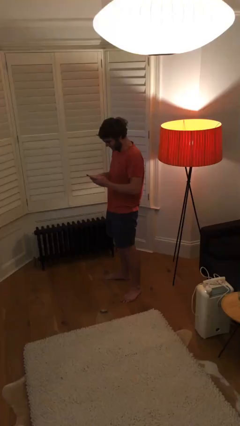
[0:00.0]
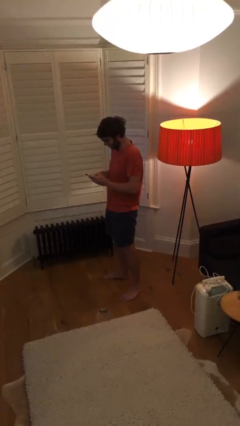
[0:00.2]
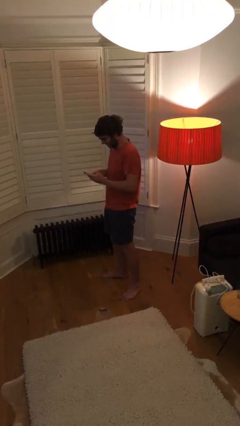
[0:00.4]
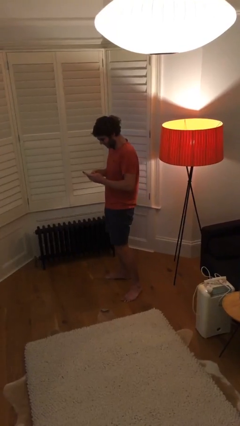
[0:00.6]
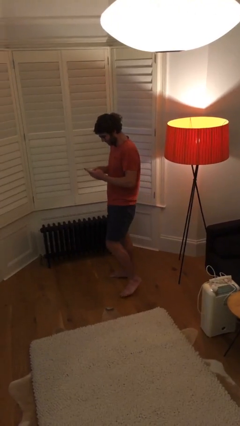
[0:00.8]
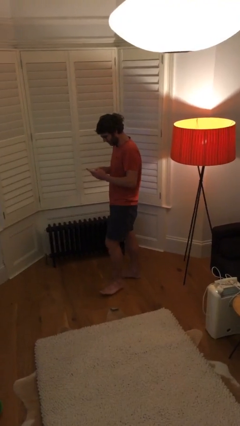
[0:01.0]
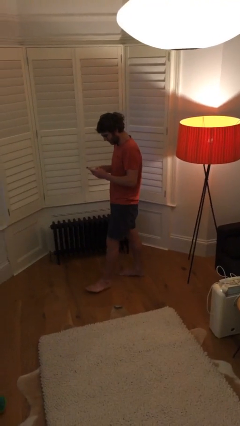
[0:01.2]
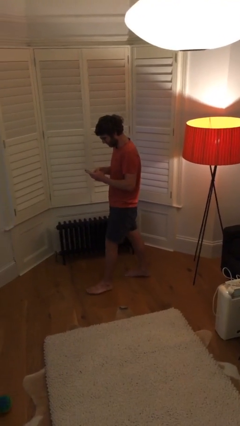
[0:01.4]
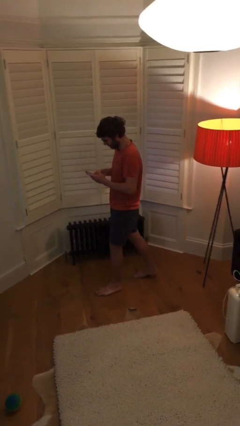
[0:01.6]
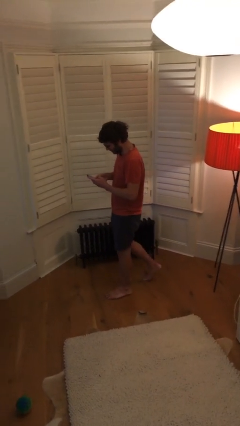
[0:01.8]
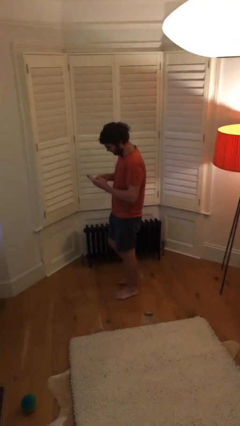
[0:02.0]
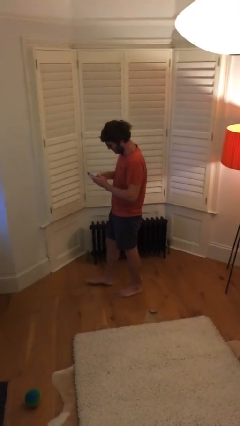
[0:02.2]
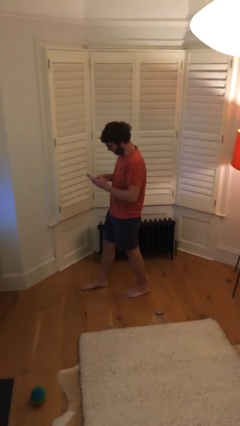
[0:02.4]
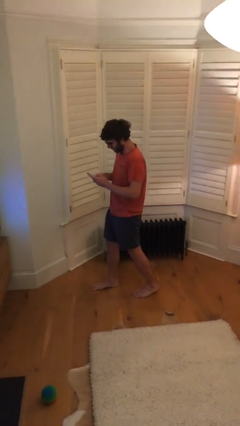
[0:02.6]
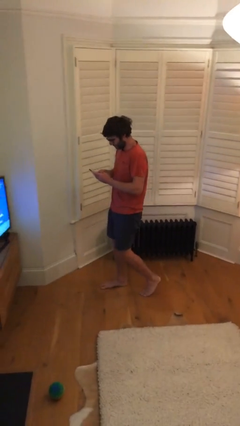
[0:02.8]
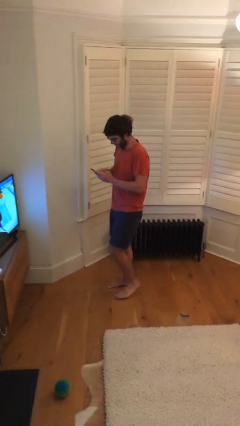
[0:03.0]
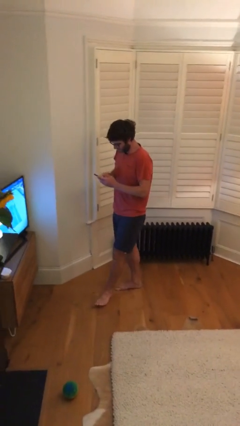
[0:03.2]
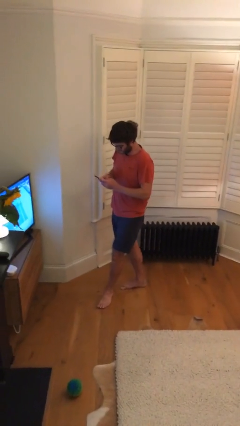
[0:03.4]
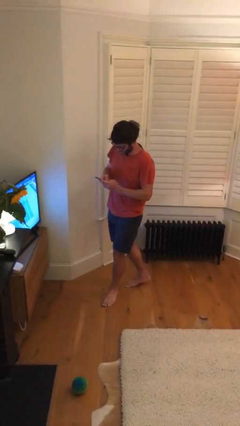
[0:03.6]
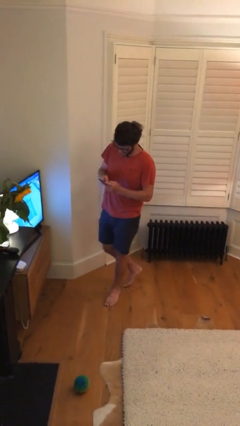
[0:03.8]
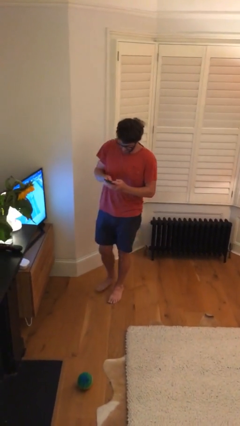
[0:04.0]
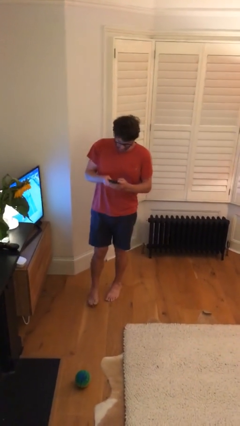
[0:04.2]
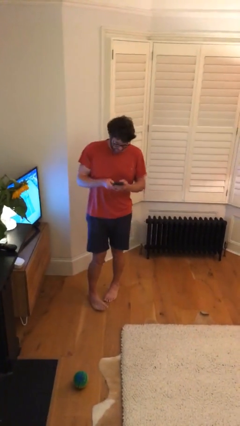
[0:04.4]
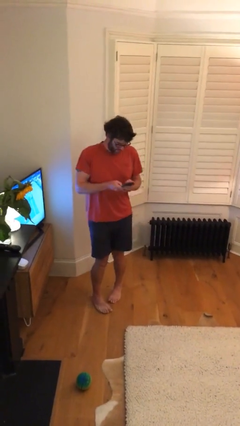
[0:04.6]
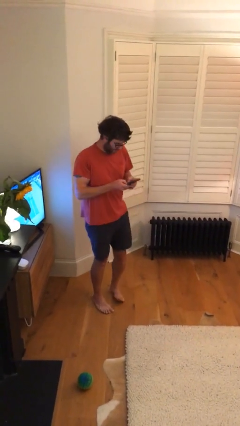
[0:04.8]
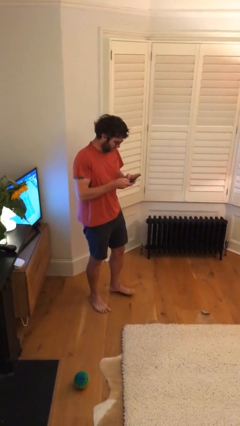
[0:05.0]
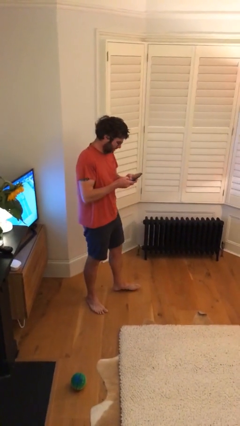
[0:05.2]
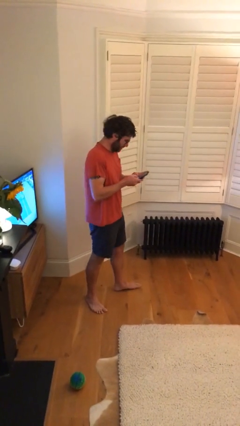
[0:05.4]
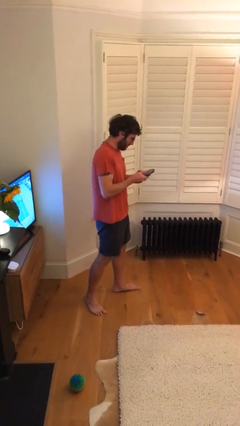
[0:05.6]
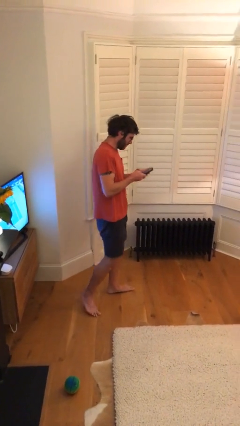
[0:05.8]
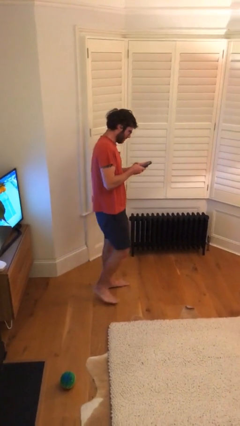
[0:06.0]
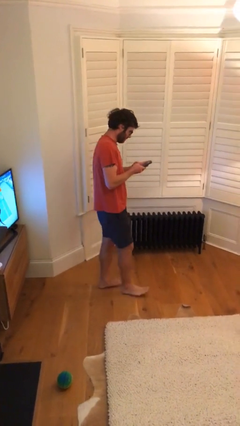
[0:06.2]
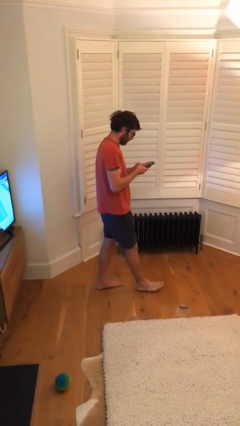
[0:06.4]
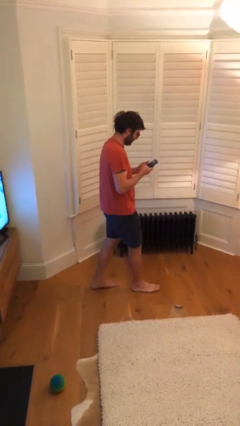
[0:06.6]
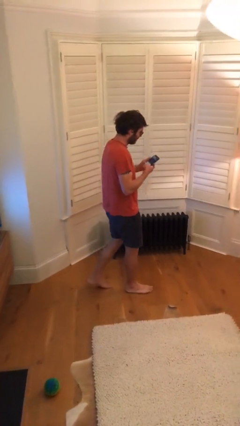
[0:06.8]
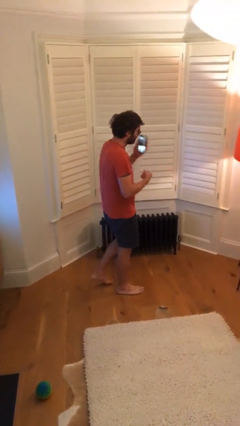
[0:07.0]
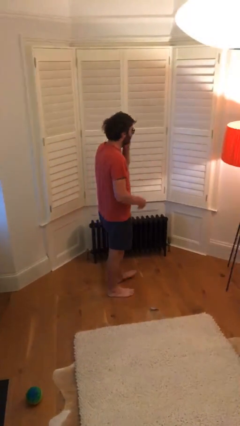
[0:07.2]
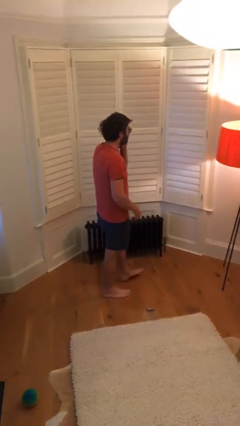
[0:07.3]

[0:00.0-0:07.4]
person texts on phone

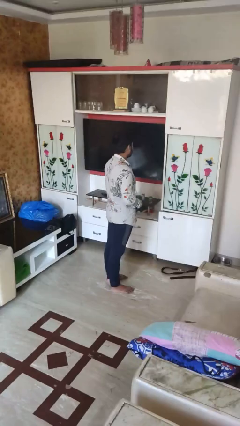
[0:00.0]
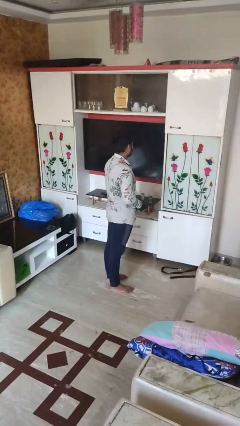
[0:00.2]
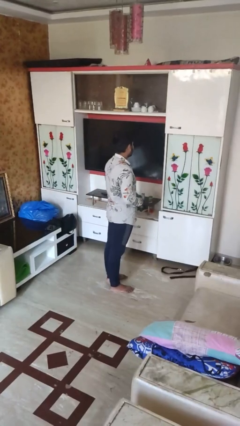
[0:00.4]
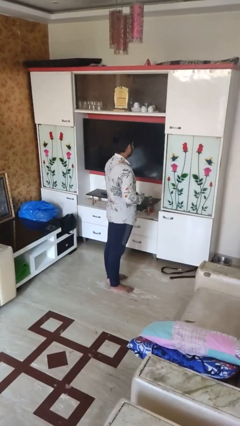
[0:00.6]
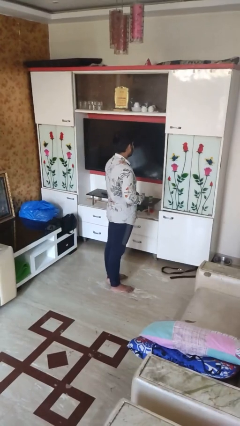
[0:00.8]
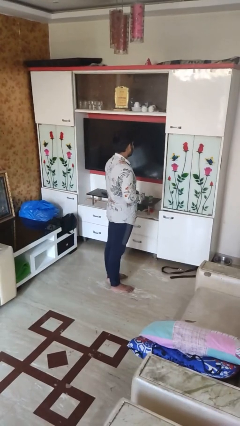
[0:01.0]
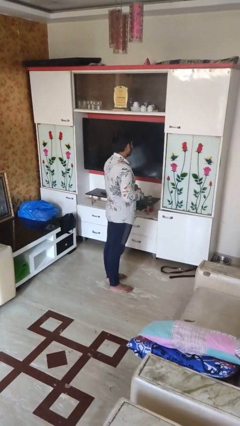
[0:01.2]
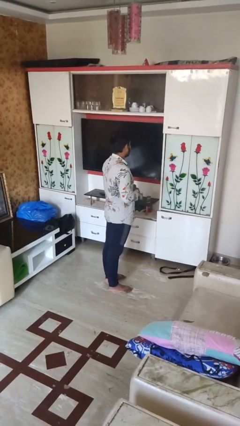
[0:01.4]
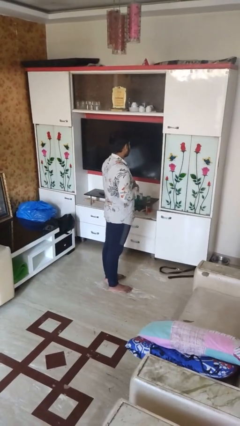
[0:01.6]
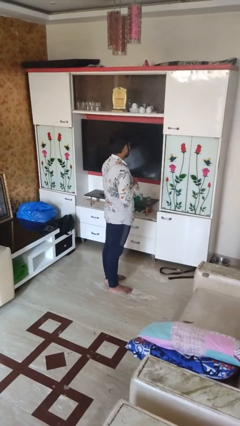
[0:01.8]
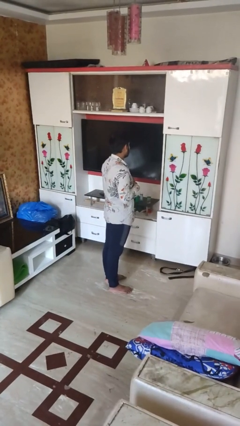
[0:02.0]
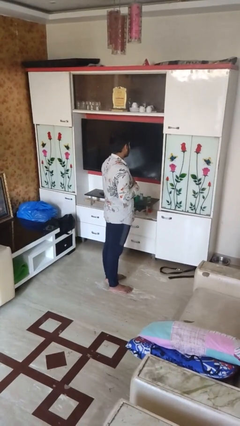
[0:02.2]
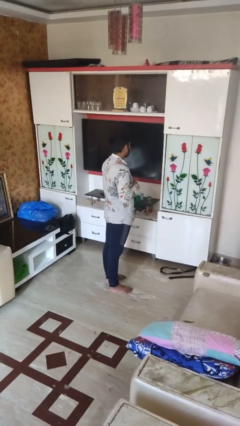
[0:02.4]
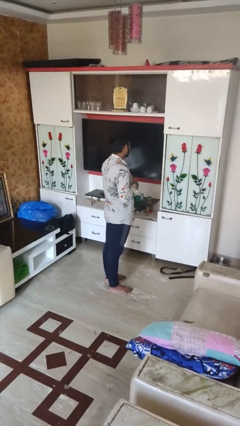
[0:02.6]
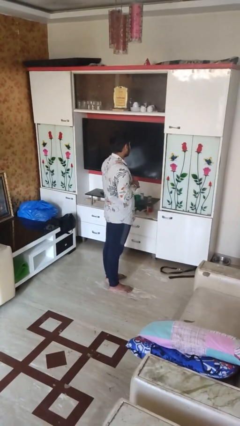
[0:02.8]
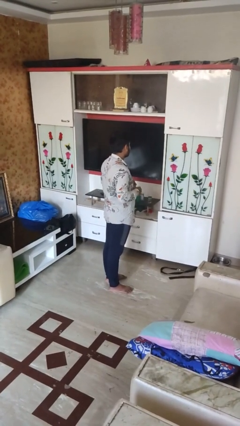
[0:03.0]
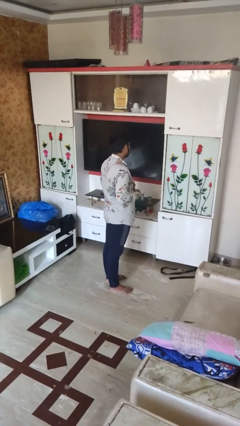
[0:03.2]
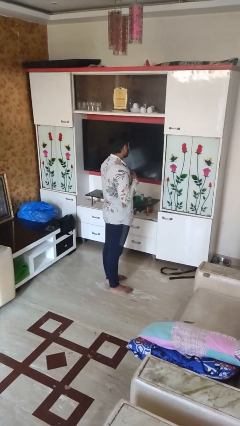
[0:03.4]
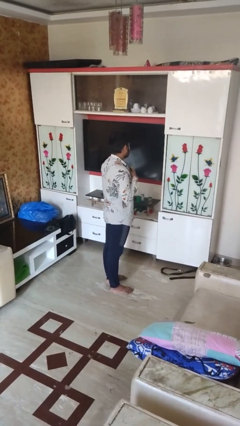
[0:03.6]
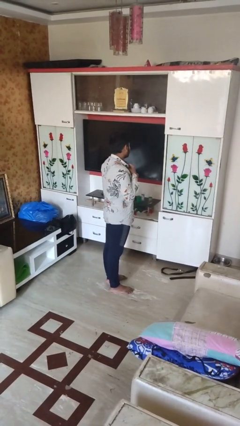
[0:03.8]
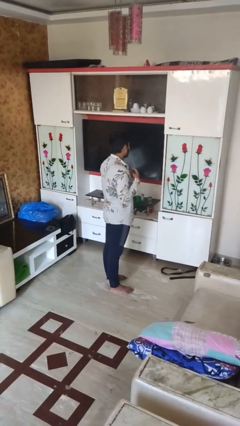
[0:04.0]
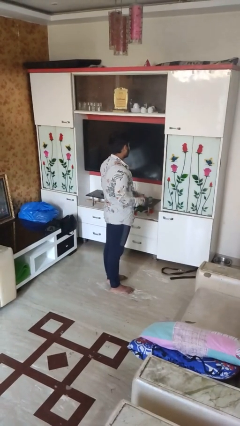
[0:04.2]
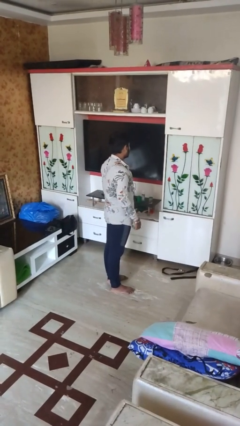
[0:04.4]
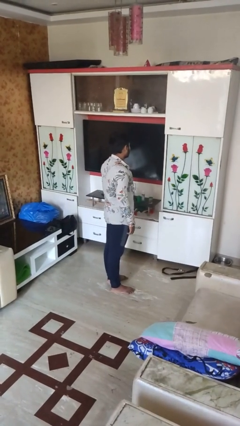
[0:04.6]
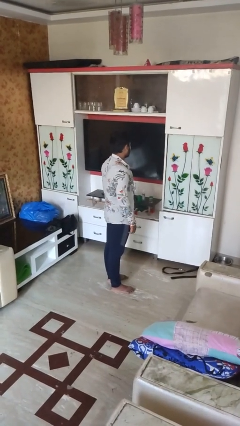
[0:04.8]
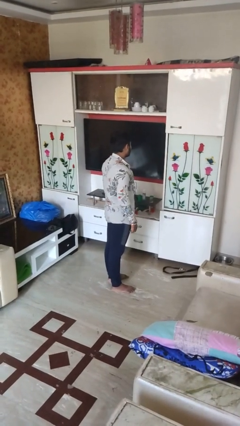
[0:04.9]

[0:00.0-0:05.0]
person unbuttons shirt

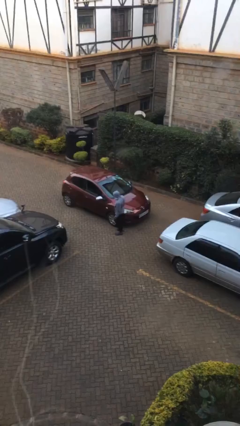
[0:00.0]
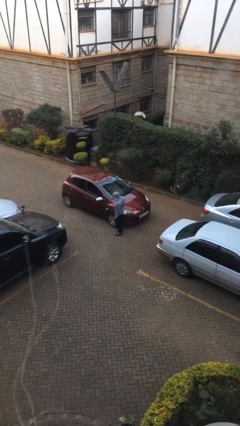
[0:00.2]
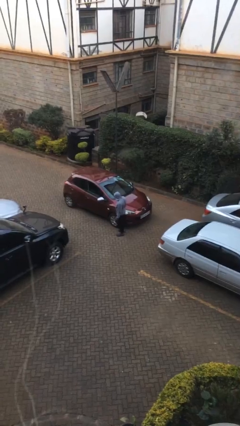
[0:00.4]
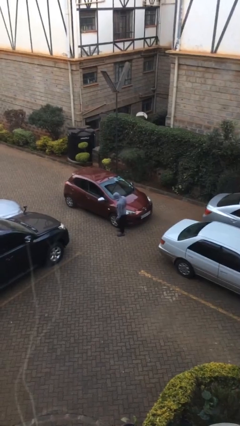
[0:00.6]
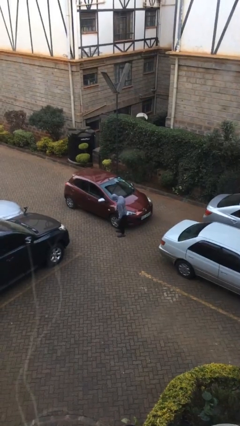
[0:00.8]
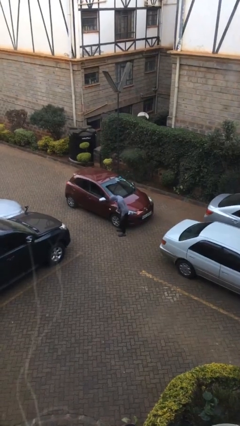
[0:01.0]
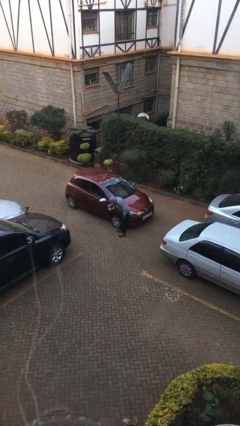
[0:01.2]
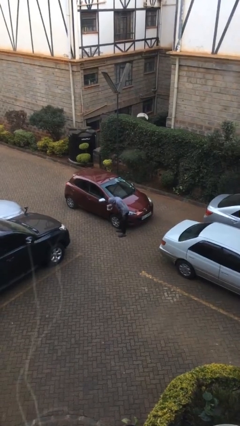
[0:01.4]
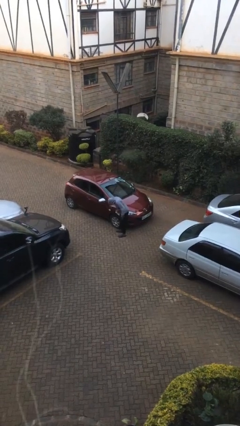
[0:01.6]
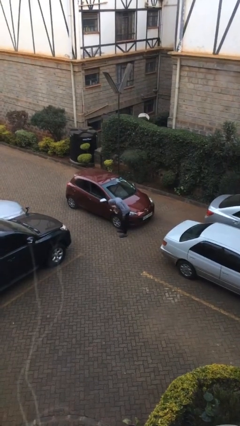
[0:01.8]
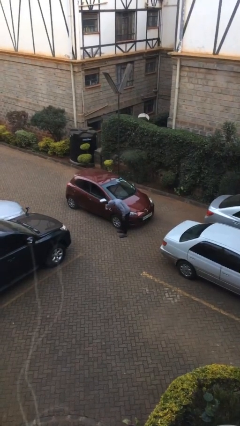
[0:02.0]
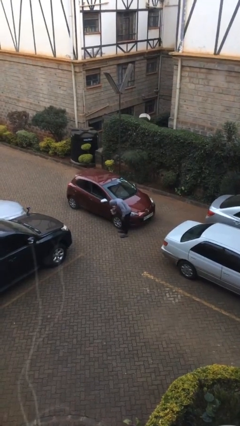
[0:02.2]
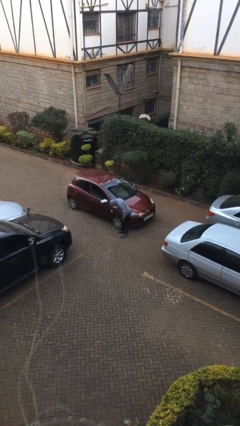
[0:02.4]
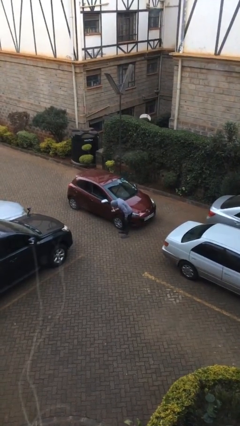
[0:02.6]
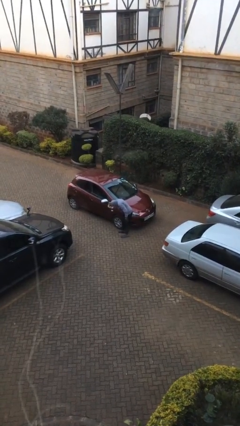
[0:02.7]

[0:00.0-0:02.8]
person polishes car with rag

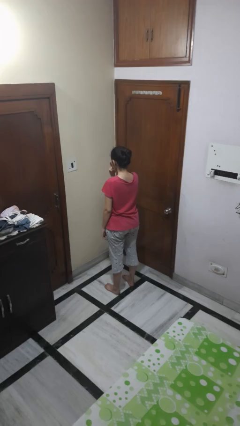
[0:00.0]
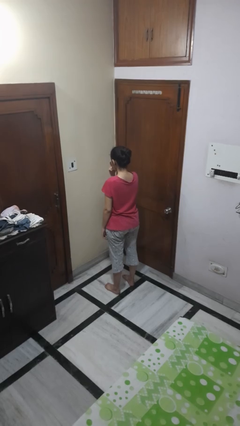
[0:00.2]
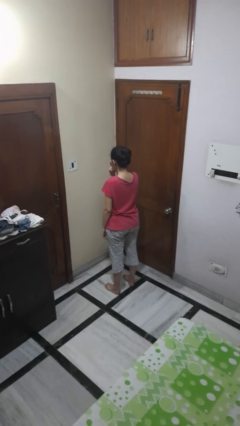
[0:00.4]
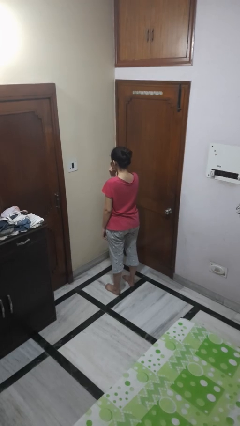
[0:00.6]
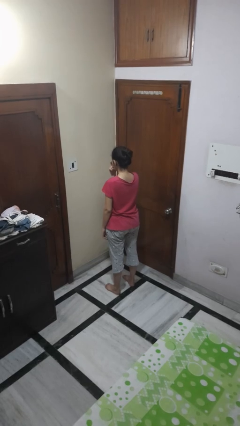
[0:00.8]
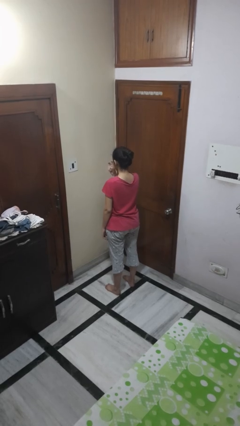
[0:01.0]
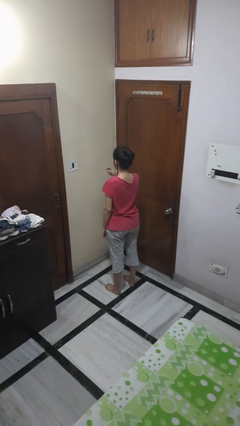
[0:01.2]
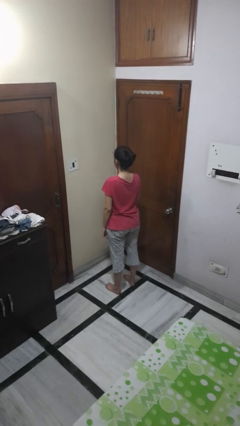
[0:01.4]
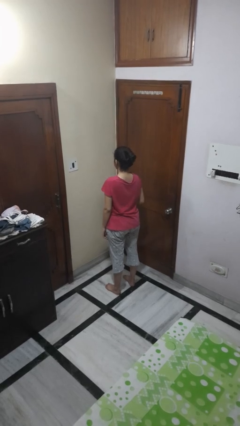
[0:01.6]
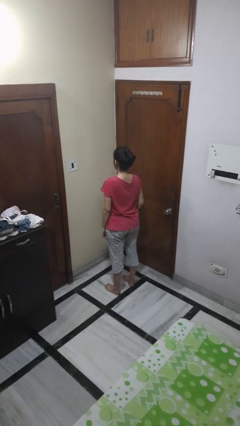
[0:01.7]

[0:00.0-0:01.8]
person gestures watch closely

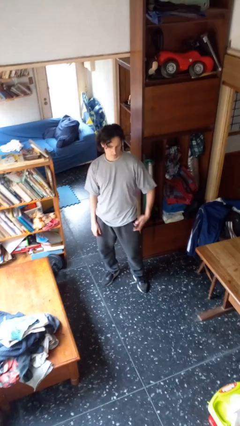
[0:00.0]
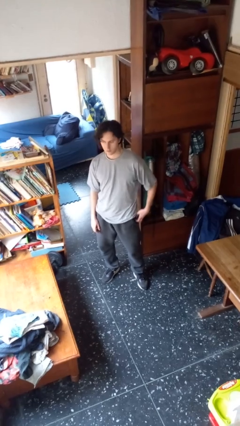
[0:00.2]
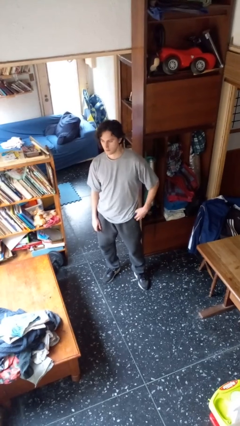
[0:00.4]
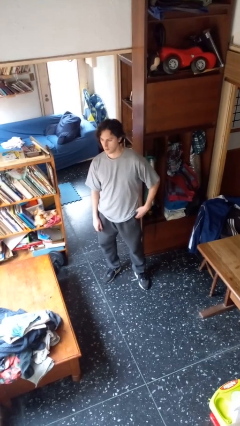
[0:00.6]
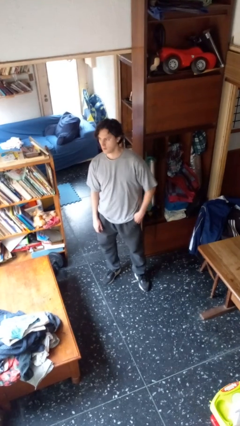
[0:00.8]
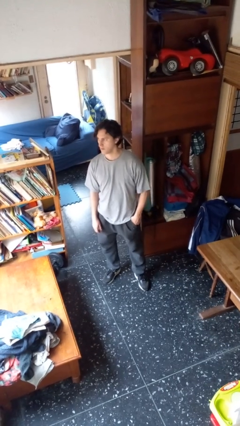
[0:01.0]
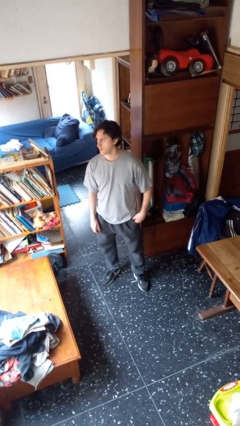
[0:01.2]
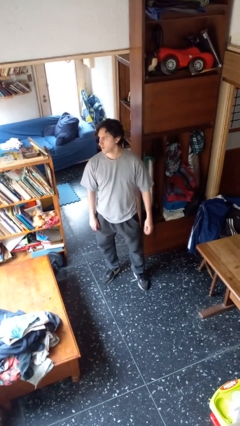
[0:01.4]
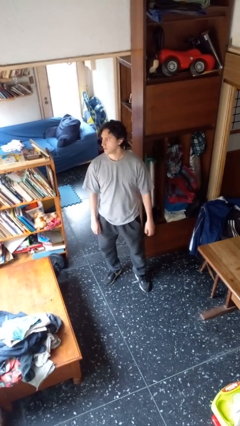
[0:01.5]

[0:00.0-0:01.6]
person puts phone into pocket
